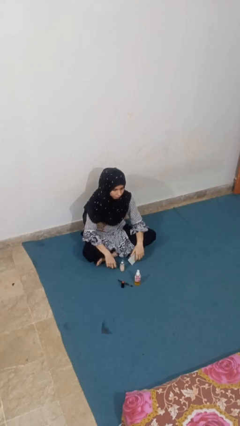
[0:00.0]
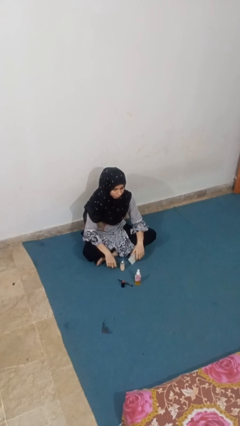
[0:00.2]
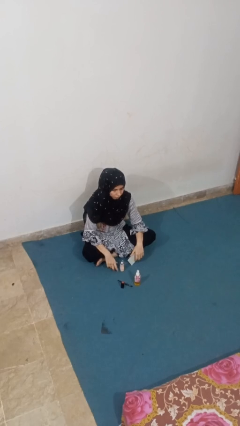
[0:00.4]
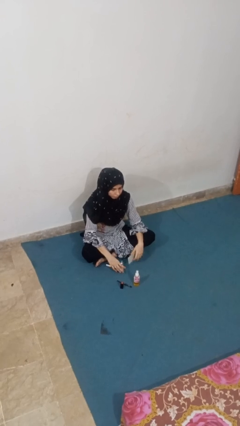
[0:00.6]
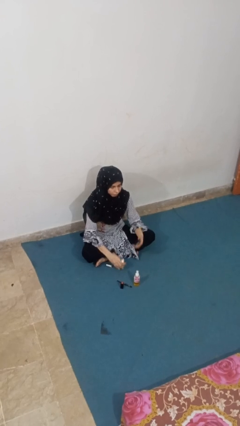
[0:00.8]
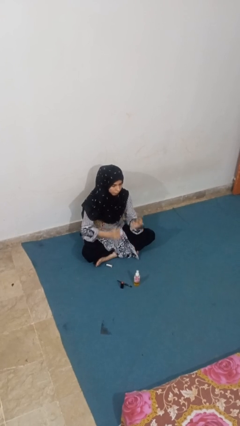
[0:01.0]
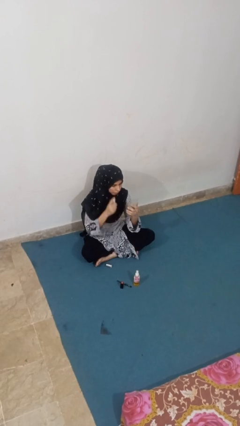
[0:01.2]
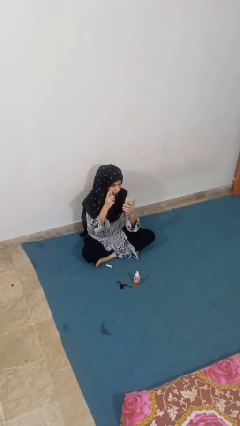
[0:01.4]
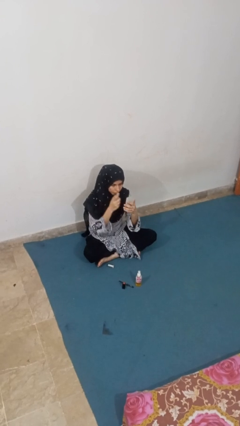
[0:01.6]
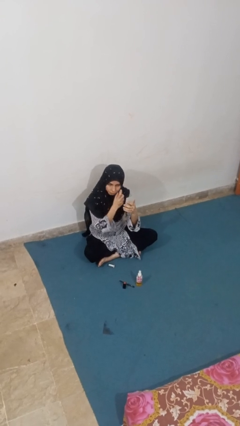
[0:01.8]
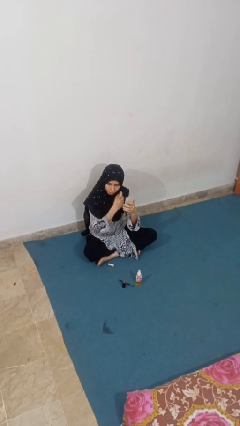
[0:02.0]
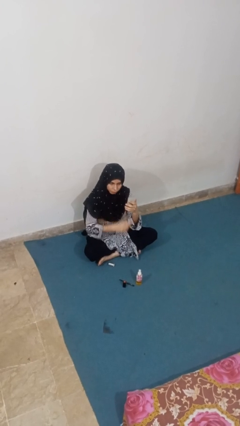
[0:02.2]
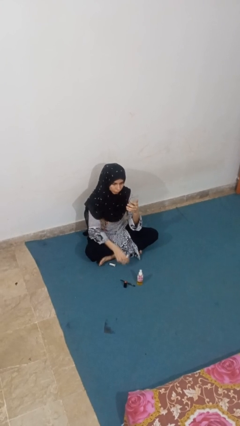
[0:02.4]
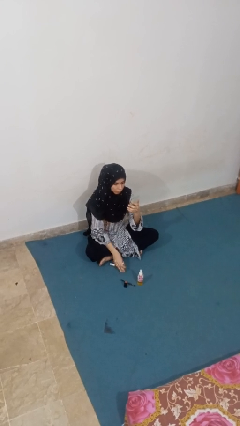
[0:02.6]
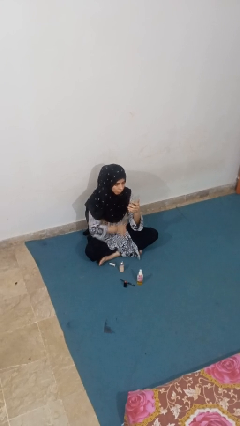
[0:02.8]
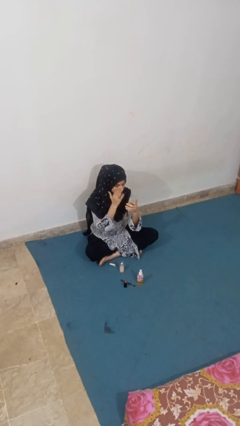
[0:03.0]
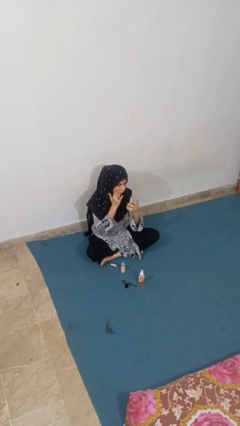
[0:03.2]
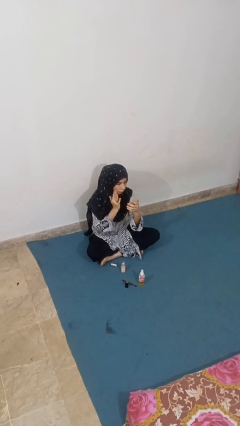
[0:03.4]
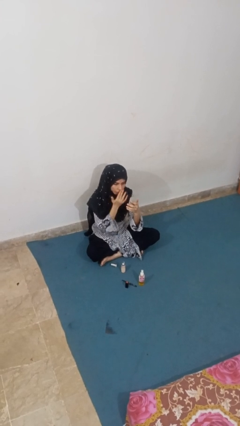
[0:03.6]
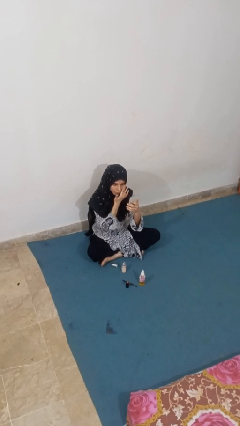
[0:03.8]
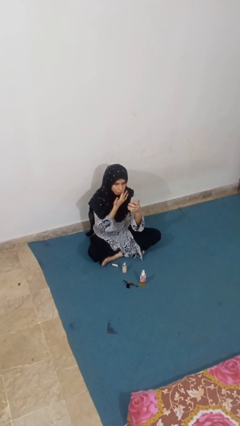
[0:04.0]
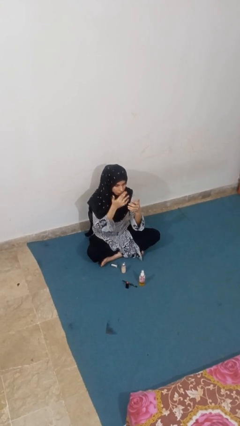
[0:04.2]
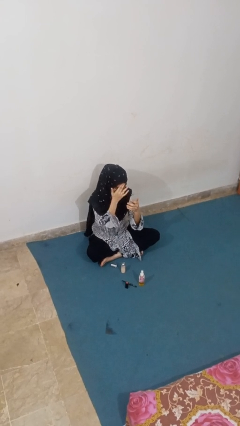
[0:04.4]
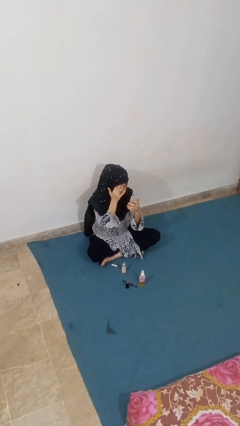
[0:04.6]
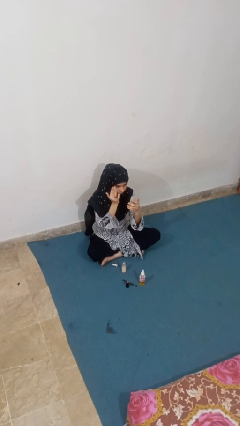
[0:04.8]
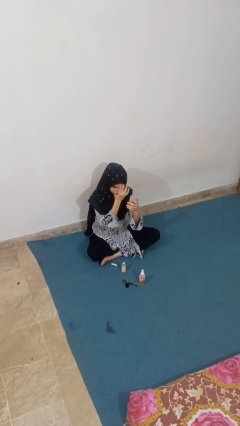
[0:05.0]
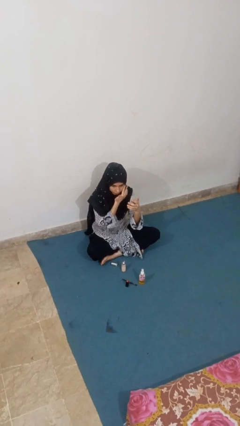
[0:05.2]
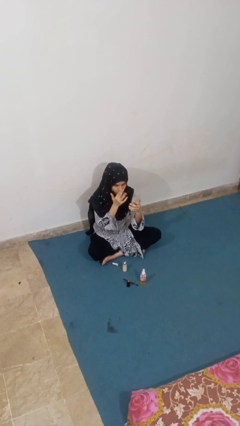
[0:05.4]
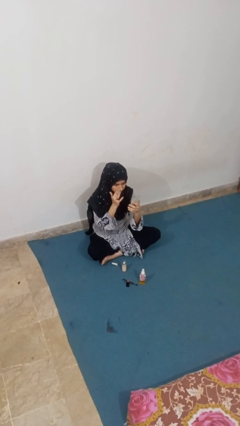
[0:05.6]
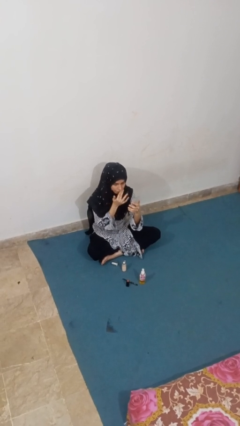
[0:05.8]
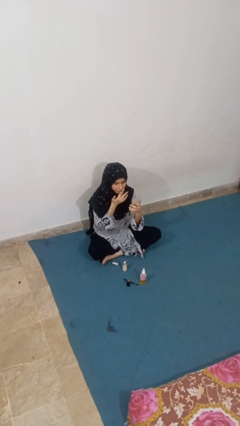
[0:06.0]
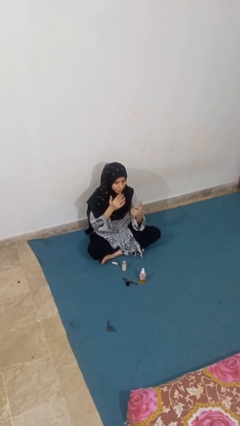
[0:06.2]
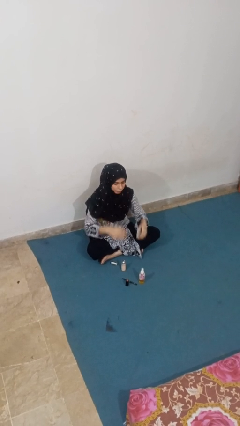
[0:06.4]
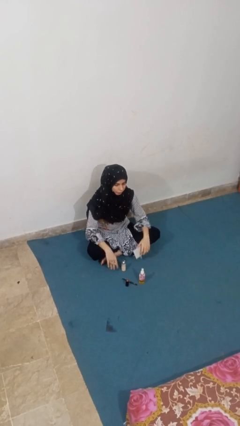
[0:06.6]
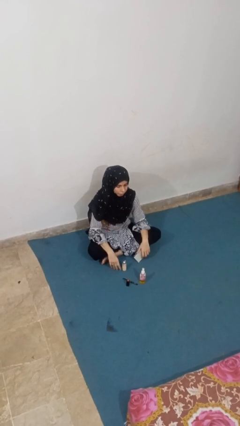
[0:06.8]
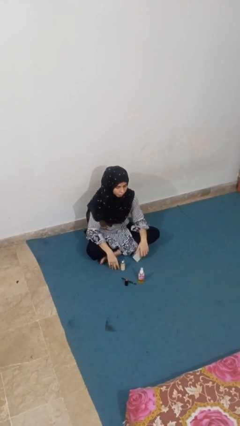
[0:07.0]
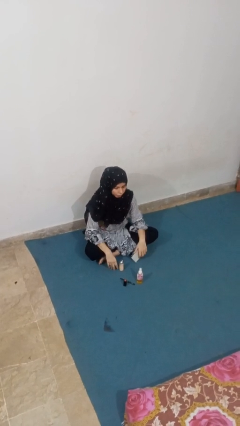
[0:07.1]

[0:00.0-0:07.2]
person applies foundation makeup

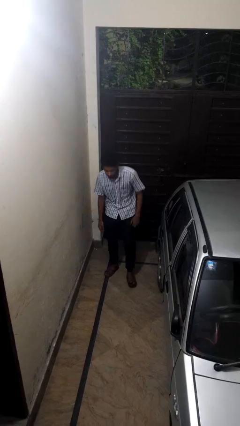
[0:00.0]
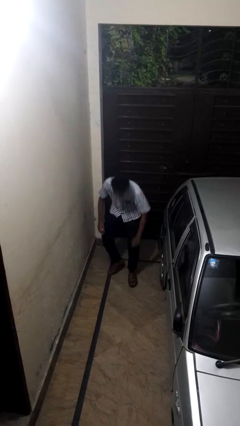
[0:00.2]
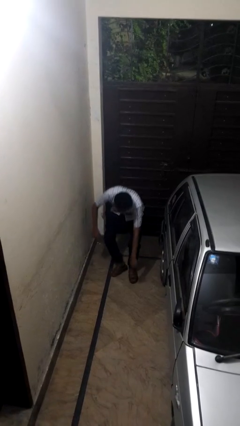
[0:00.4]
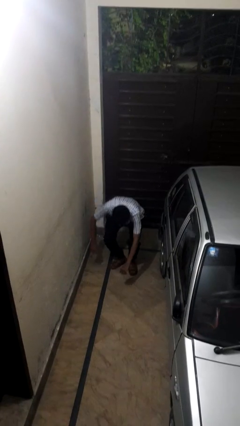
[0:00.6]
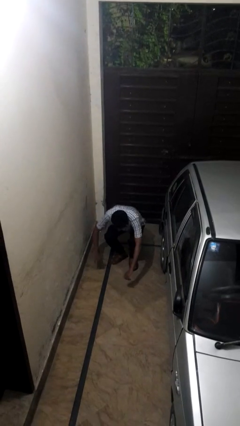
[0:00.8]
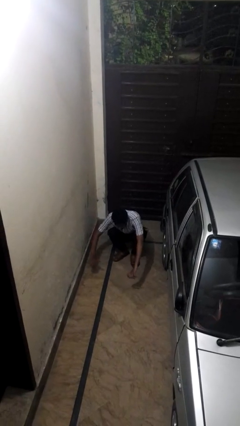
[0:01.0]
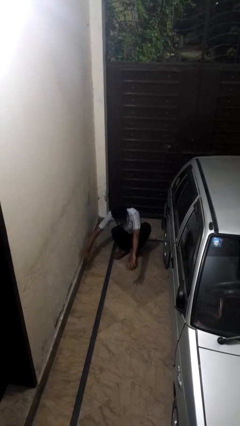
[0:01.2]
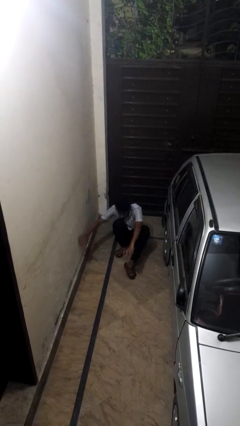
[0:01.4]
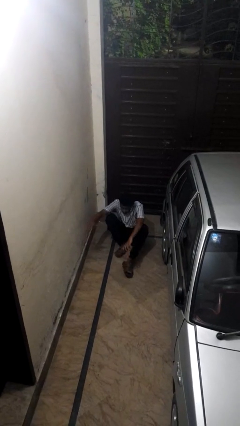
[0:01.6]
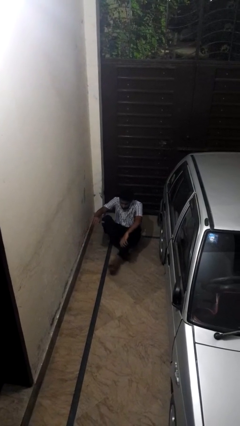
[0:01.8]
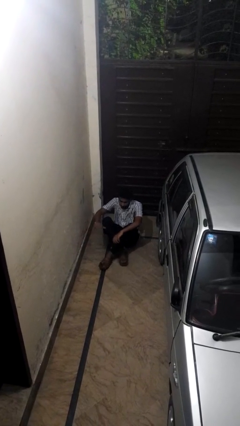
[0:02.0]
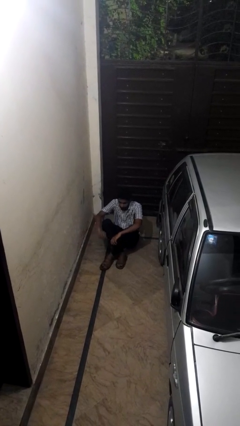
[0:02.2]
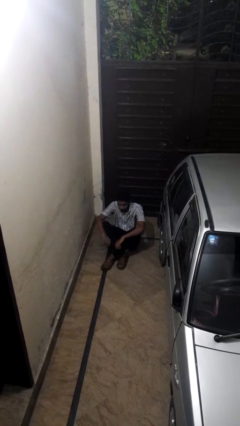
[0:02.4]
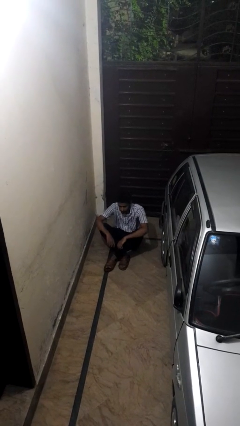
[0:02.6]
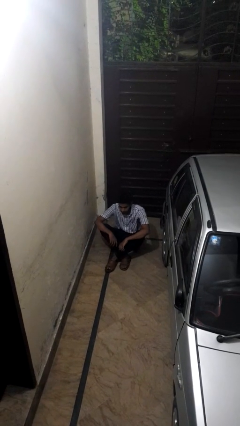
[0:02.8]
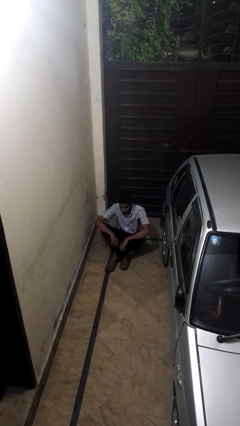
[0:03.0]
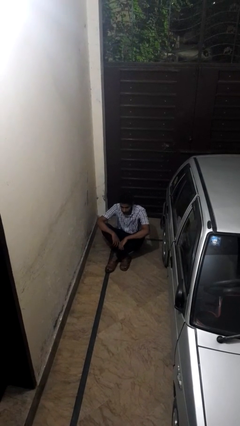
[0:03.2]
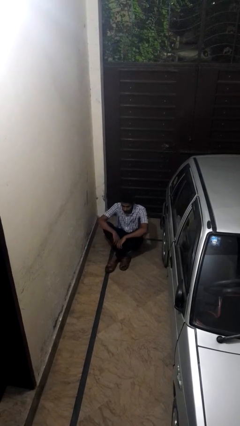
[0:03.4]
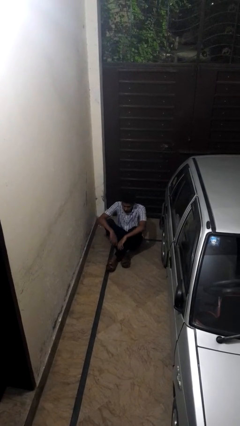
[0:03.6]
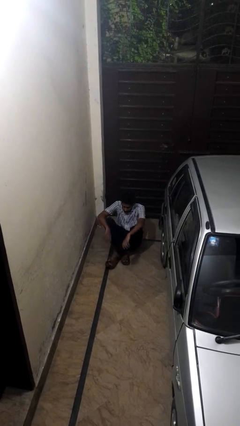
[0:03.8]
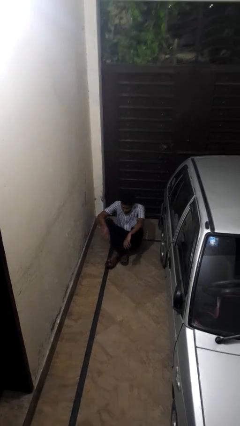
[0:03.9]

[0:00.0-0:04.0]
person sits crisscross

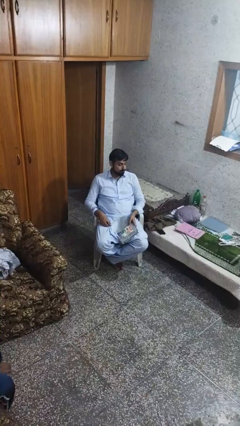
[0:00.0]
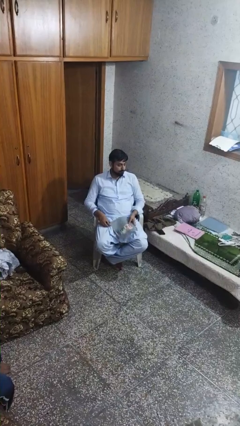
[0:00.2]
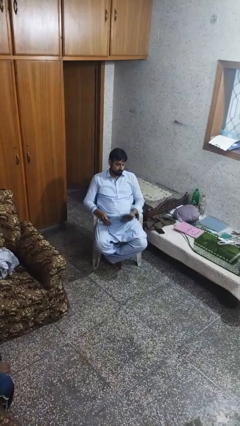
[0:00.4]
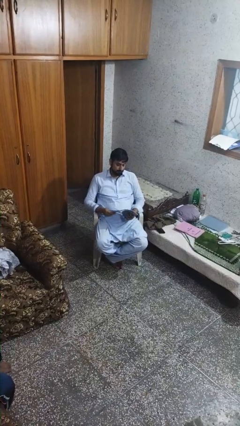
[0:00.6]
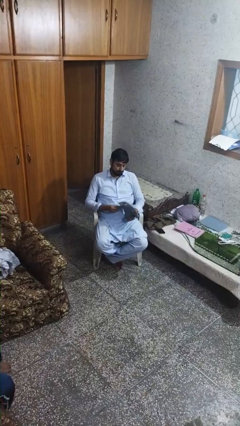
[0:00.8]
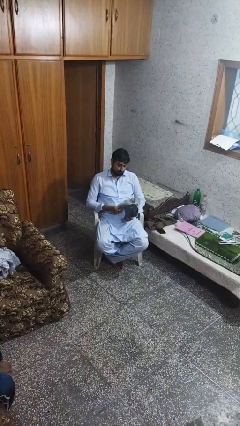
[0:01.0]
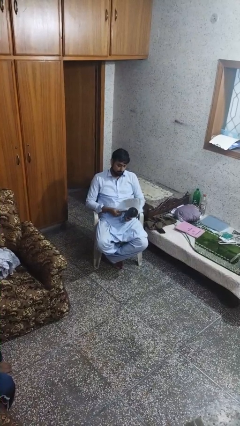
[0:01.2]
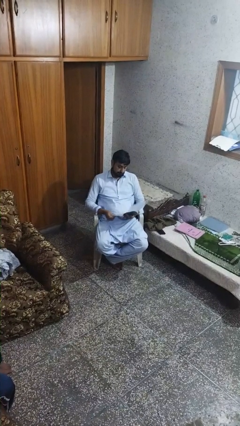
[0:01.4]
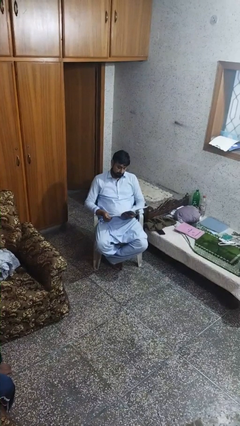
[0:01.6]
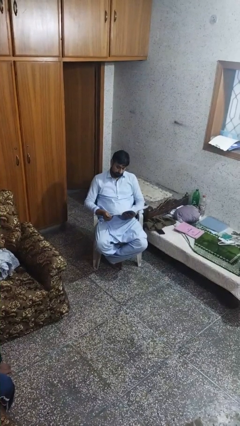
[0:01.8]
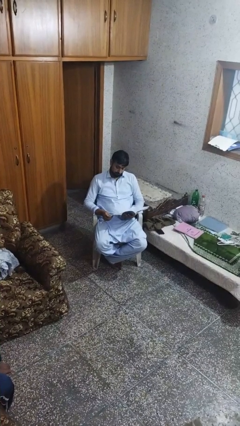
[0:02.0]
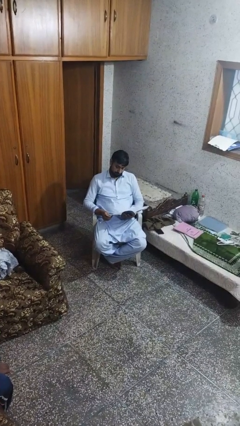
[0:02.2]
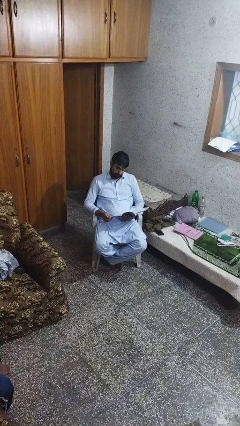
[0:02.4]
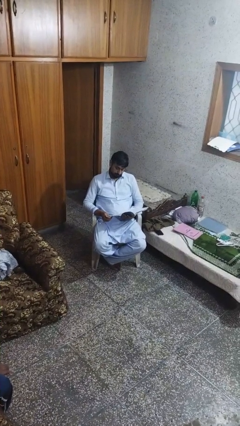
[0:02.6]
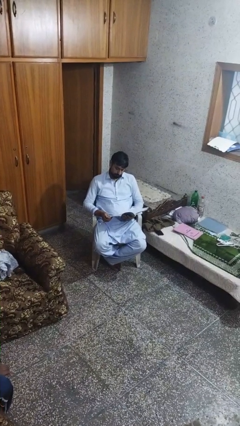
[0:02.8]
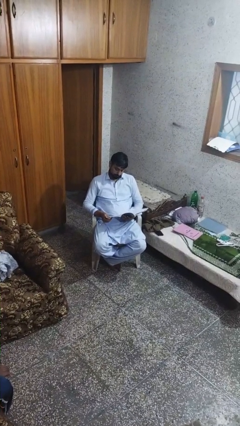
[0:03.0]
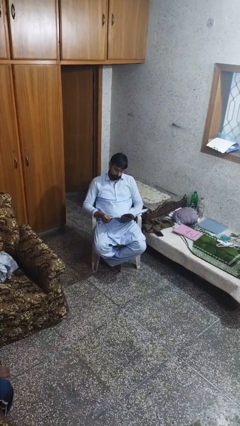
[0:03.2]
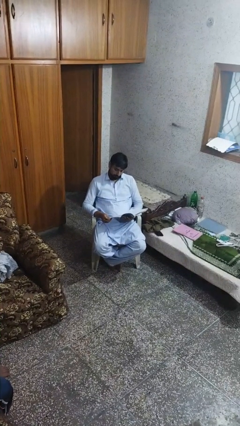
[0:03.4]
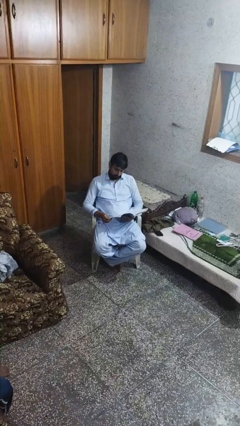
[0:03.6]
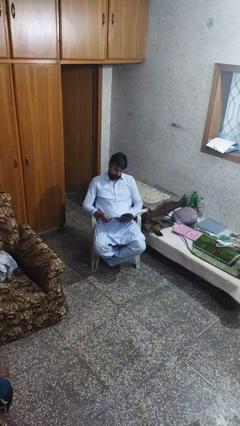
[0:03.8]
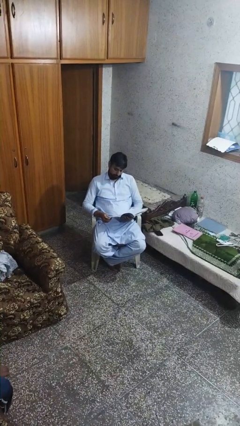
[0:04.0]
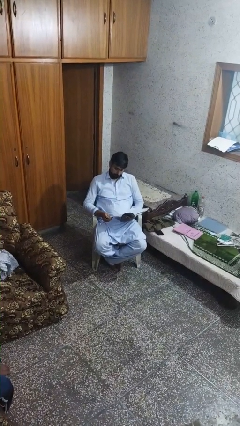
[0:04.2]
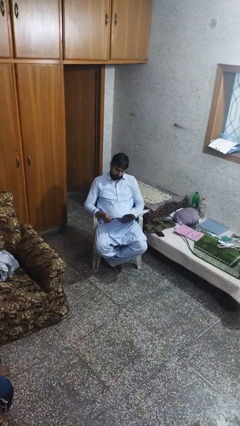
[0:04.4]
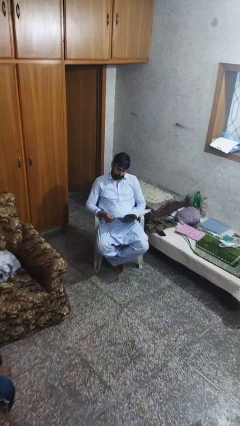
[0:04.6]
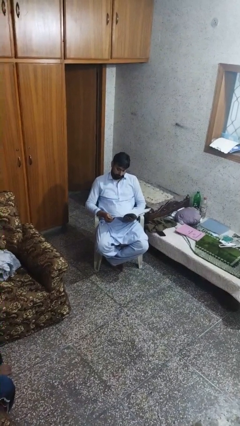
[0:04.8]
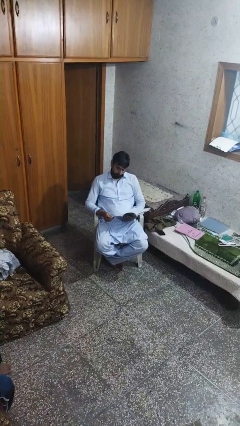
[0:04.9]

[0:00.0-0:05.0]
person reads book

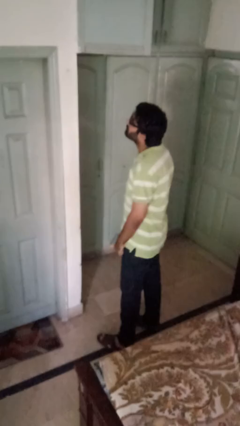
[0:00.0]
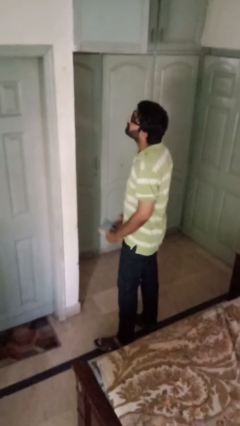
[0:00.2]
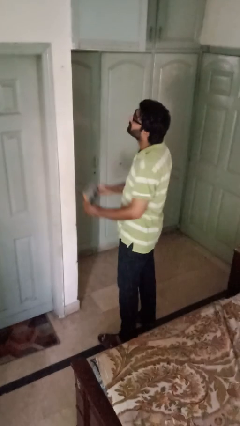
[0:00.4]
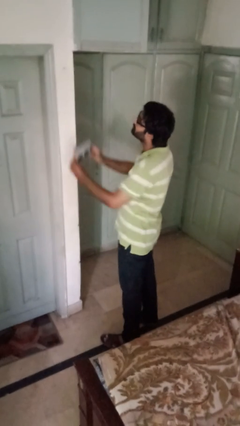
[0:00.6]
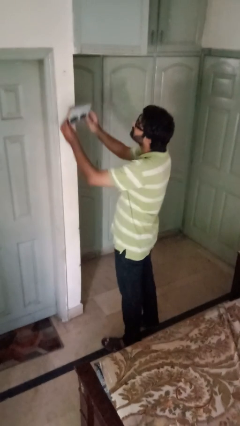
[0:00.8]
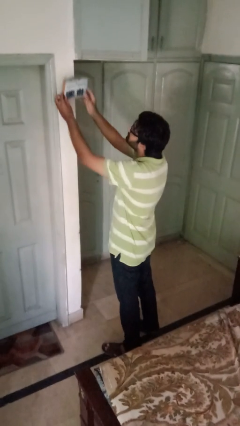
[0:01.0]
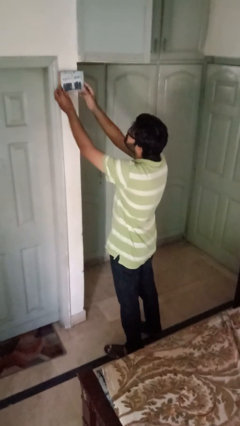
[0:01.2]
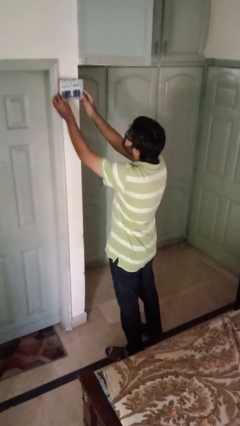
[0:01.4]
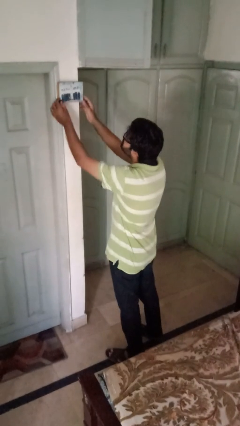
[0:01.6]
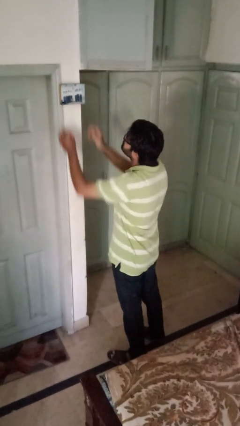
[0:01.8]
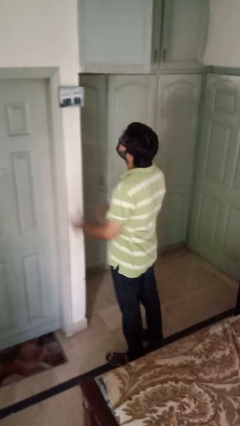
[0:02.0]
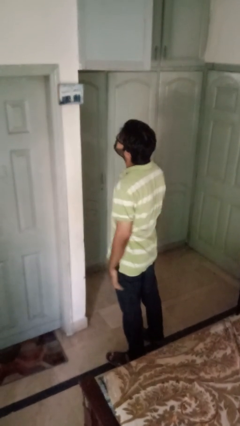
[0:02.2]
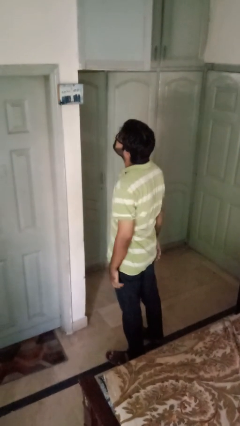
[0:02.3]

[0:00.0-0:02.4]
person puts up picture frame
